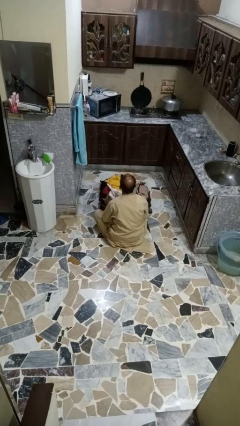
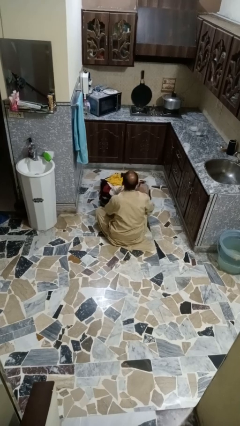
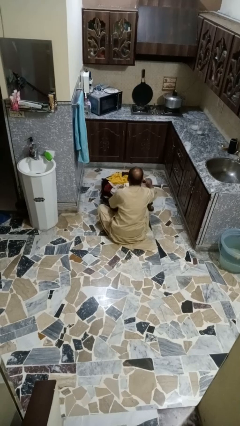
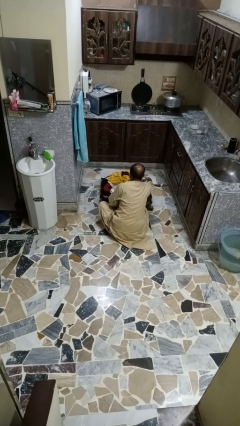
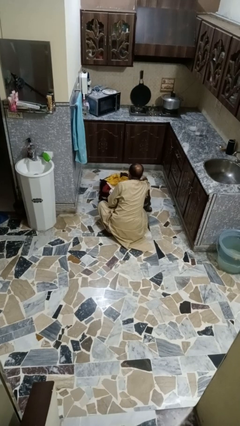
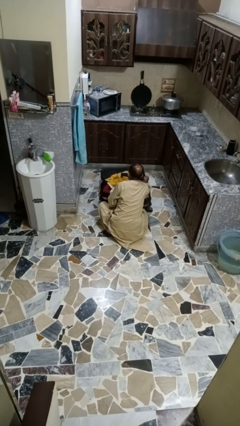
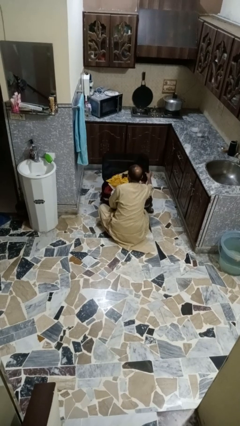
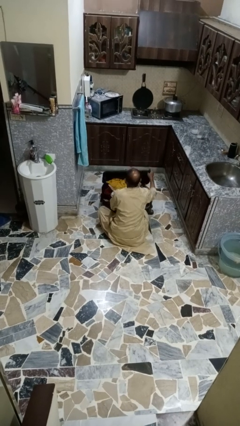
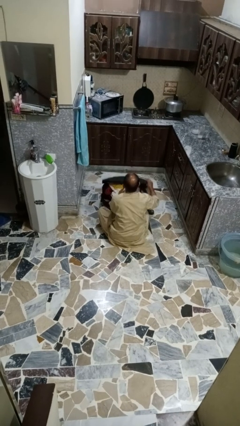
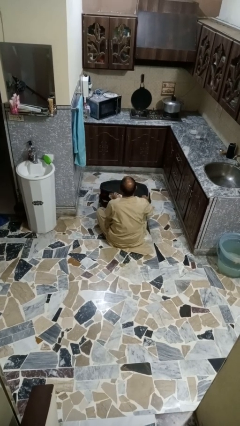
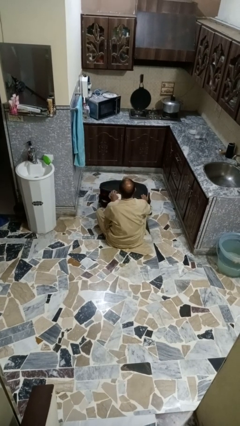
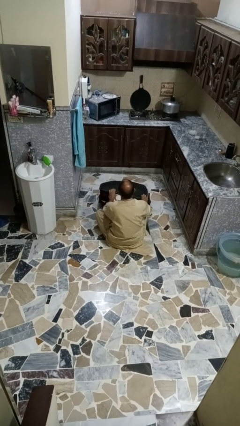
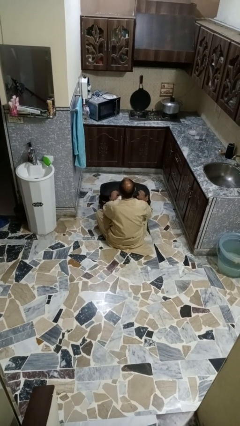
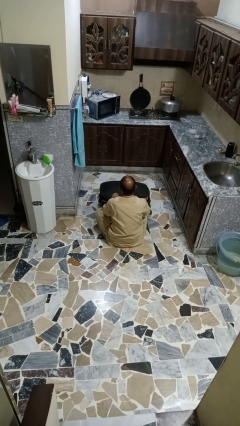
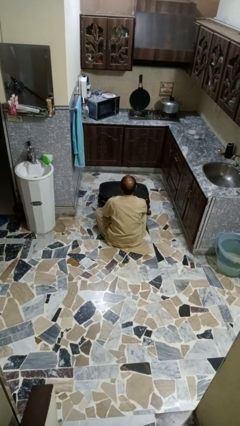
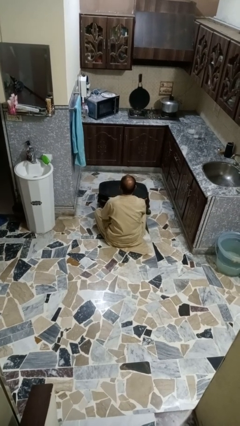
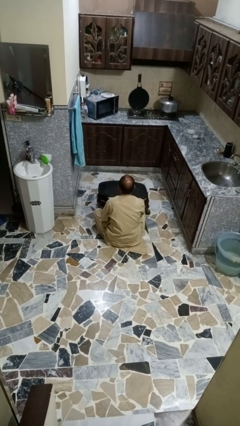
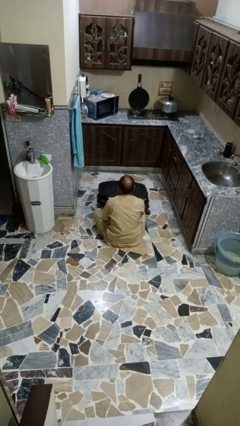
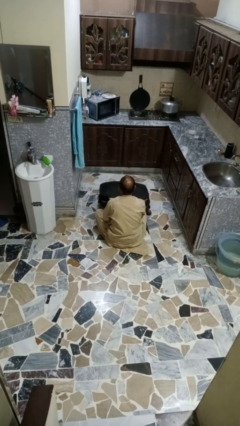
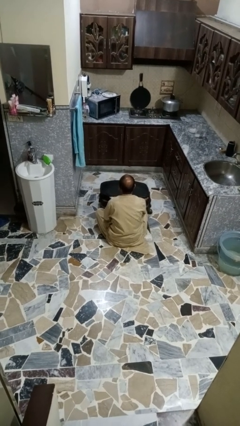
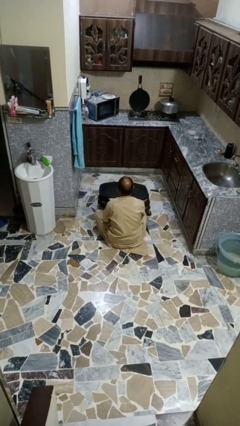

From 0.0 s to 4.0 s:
person closes suitcase

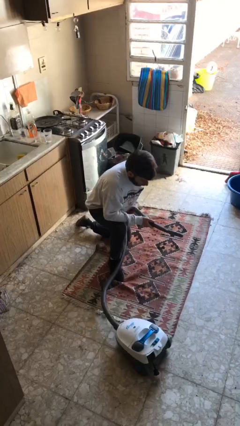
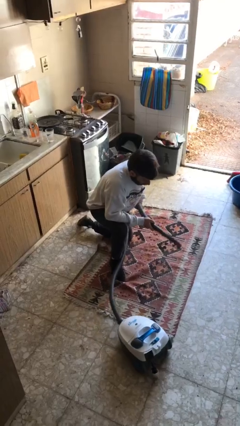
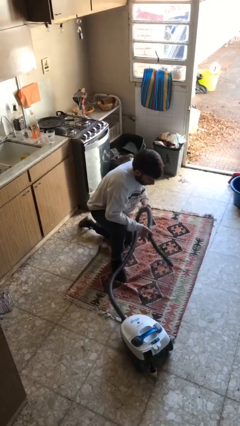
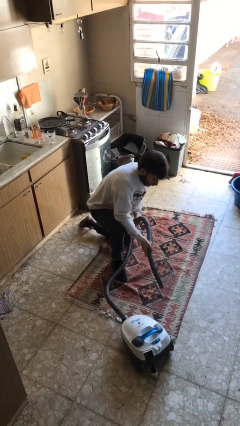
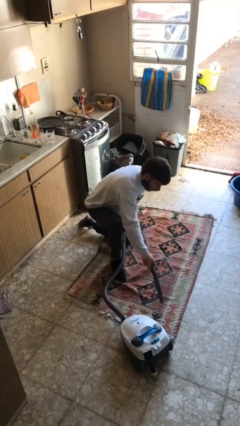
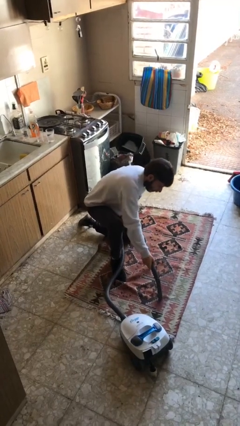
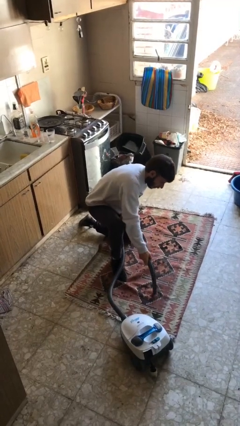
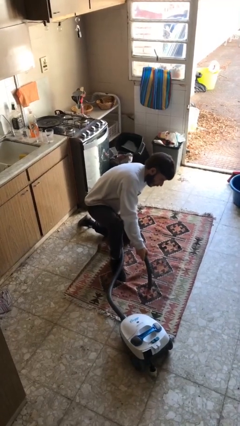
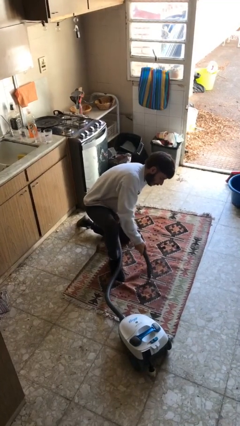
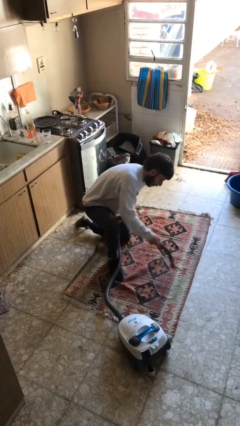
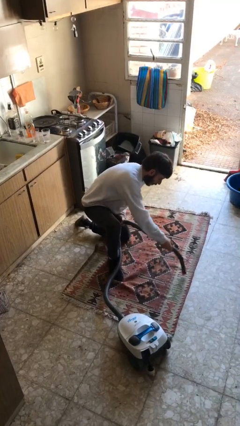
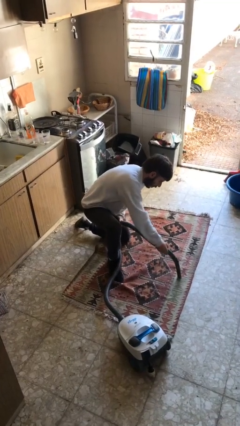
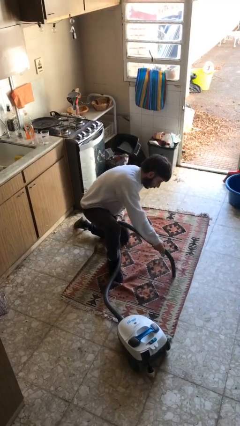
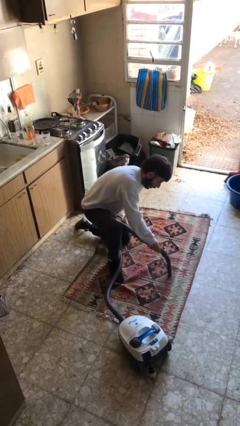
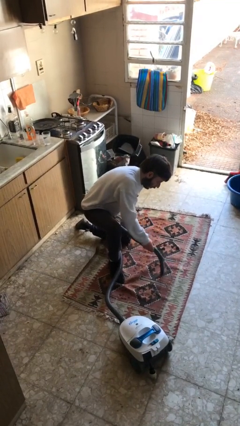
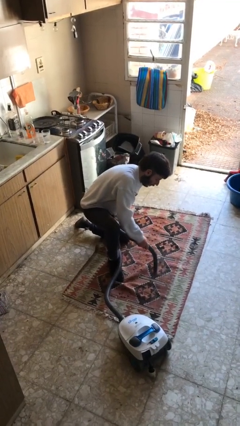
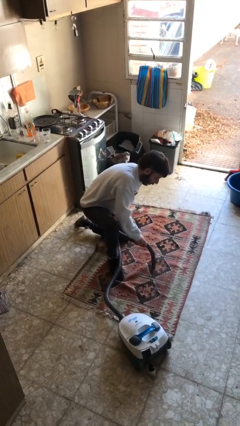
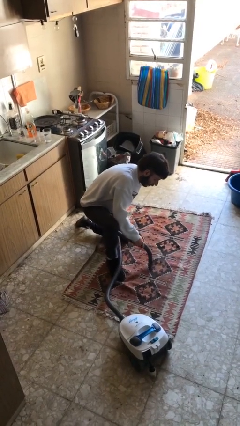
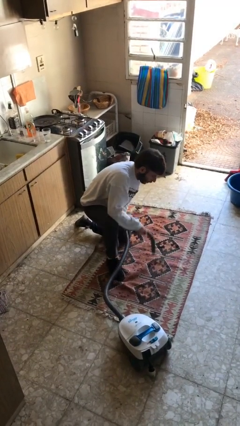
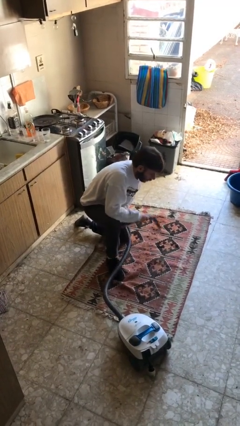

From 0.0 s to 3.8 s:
person vacuums carpet

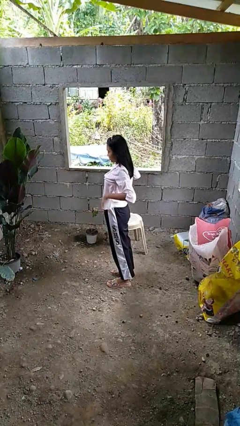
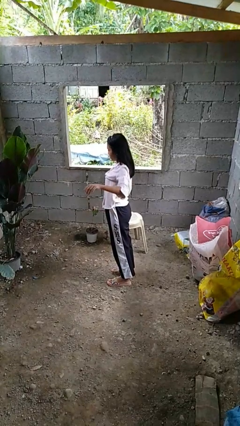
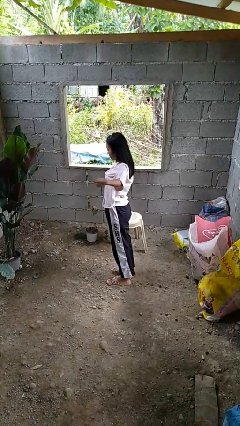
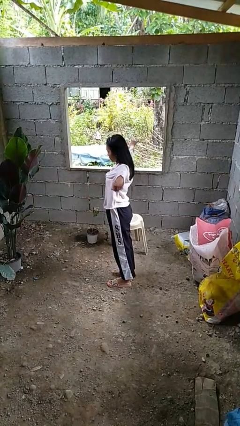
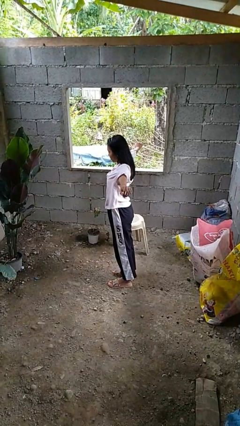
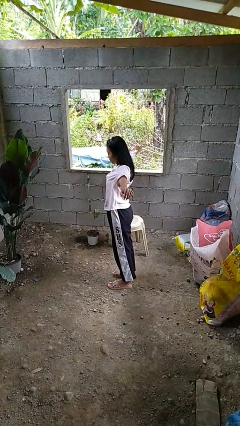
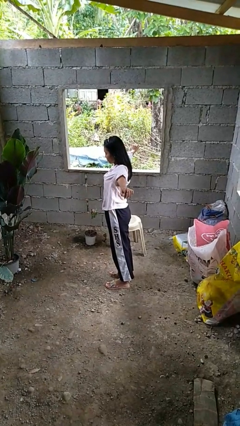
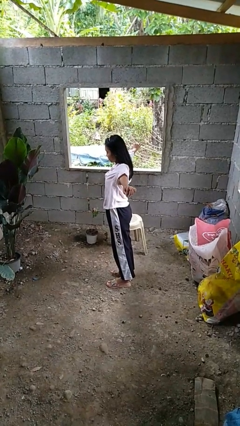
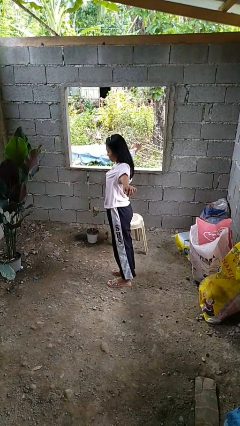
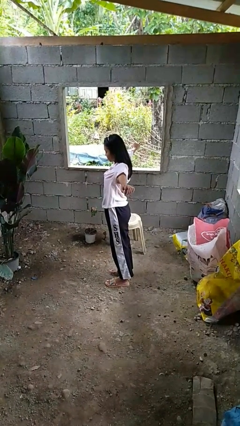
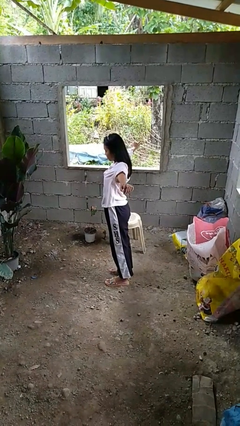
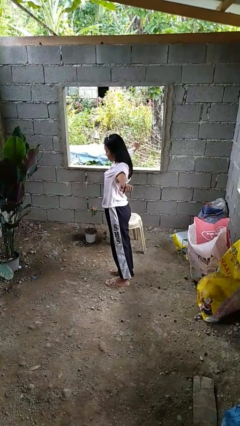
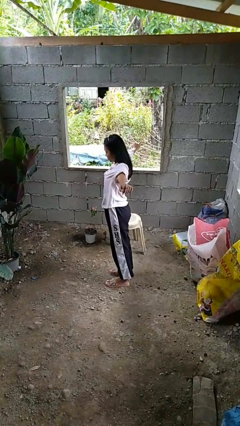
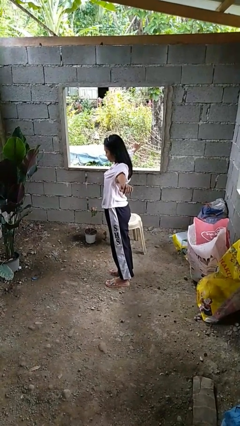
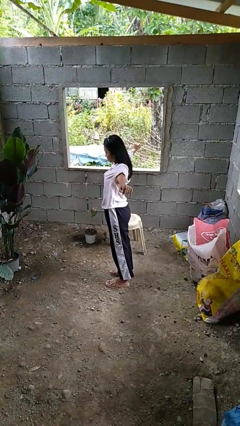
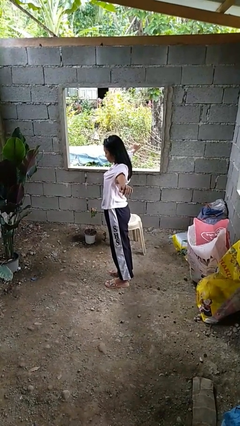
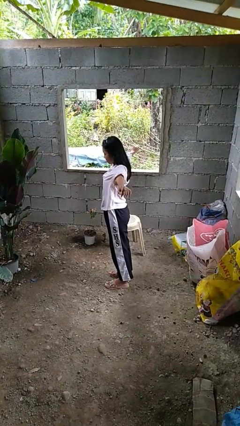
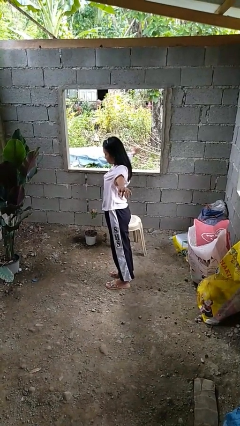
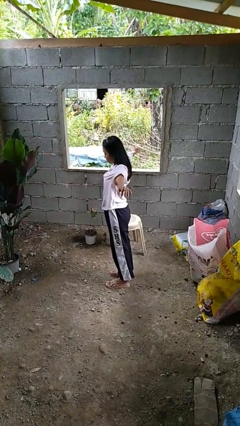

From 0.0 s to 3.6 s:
person stretches arms to side

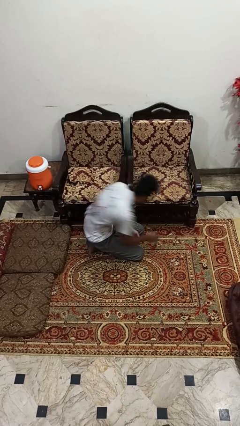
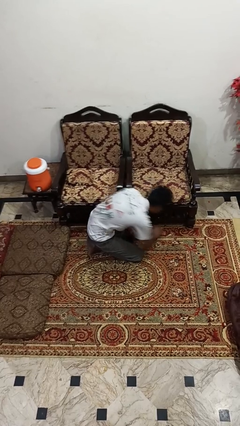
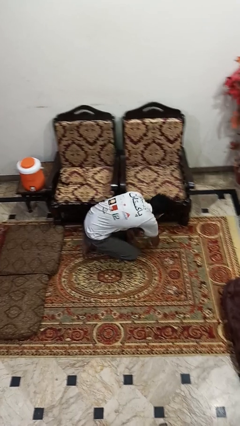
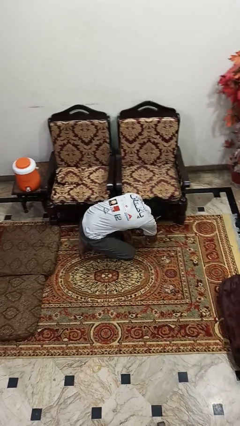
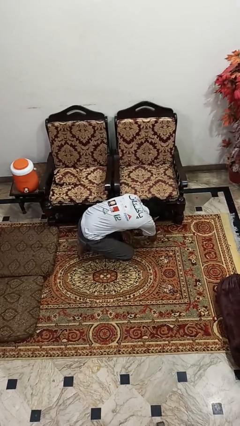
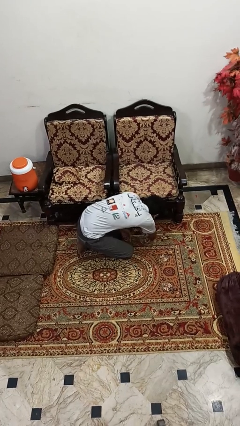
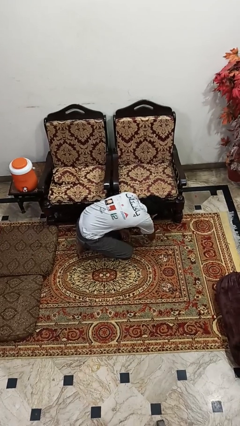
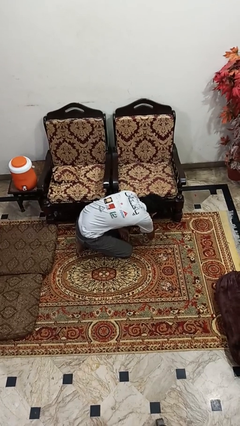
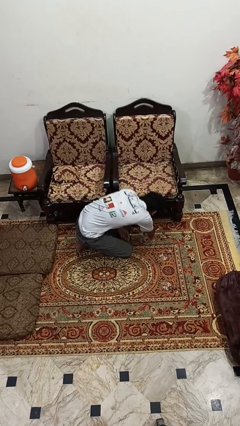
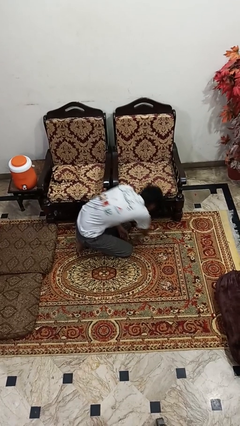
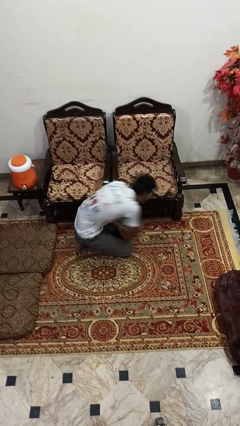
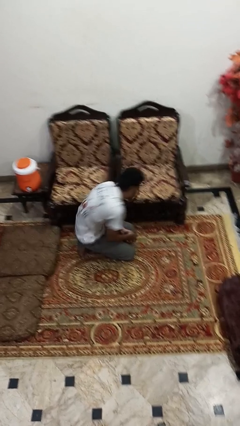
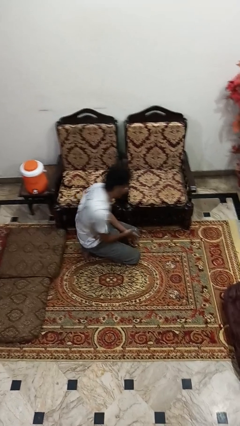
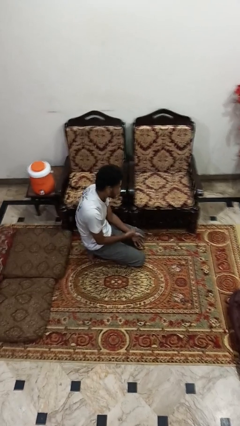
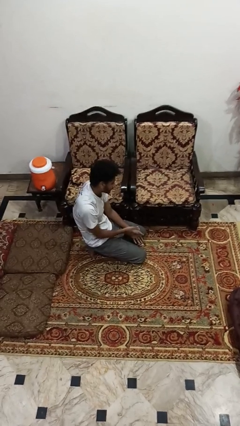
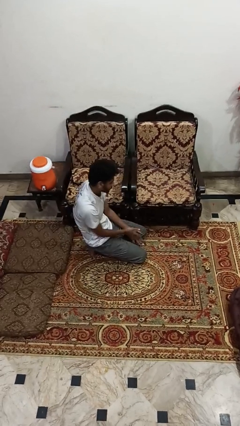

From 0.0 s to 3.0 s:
person searches under couch

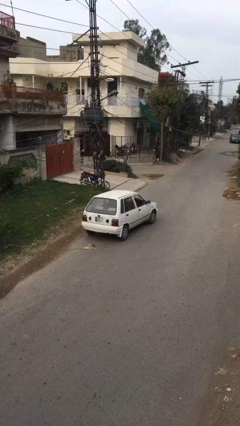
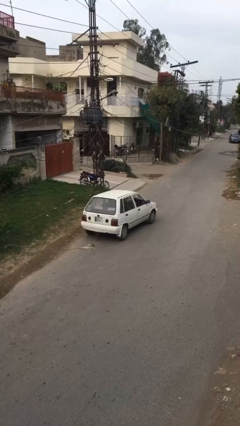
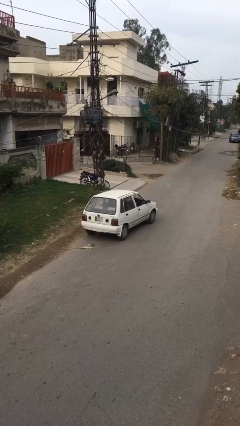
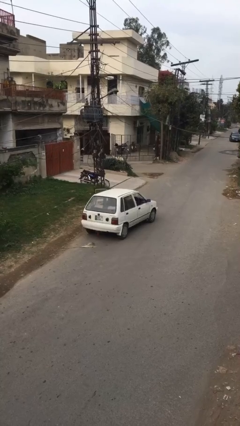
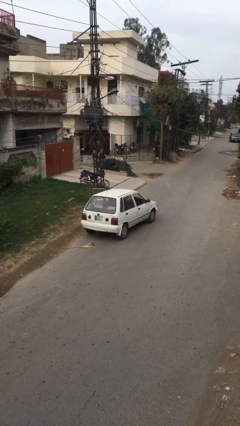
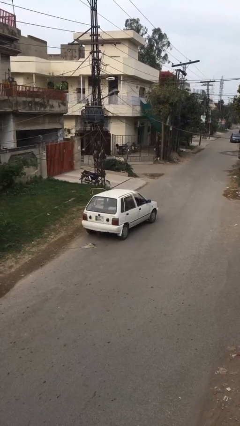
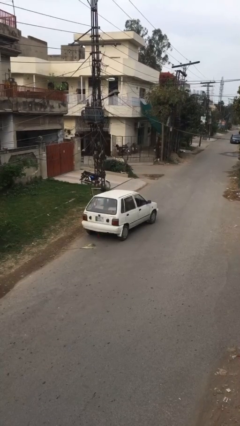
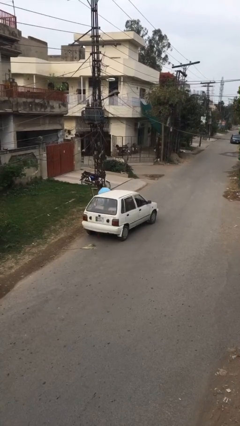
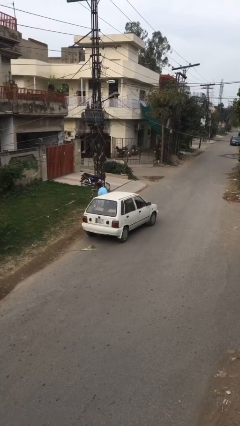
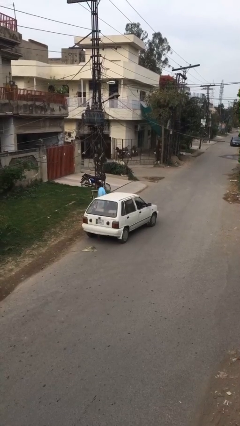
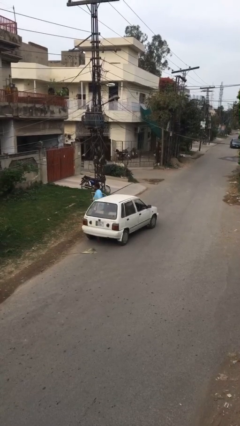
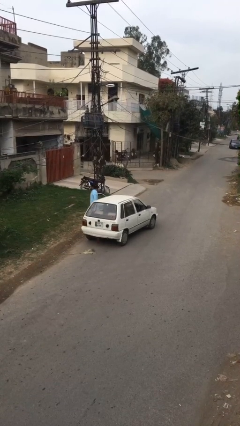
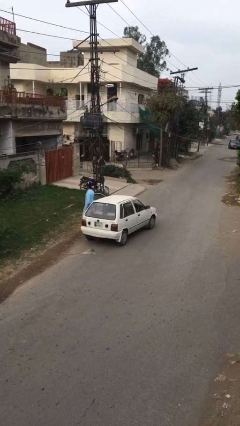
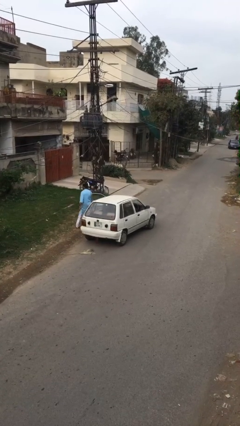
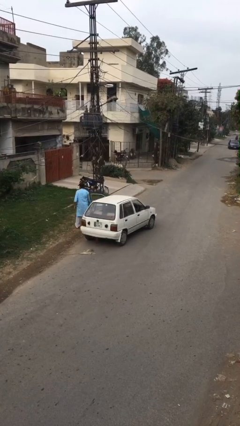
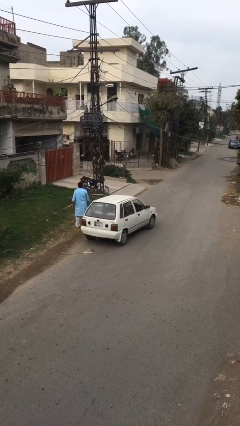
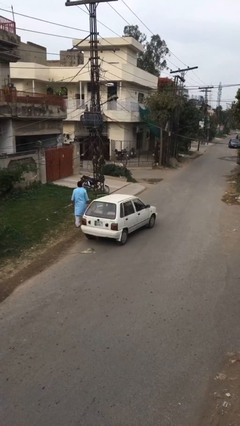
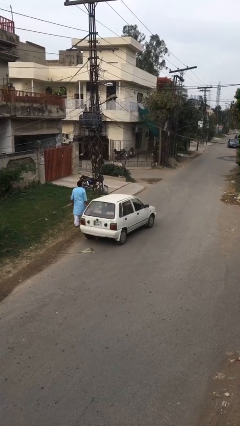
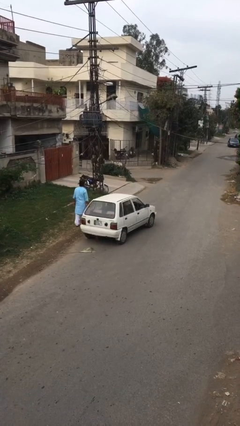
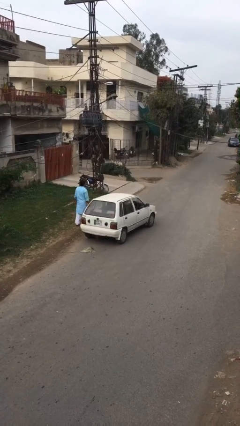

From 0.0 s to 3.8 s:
car drops off person
